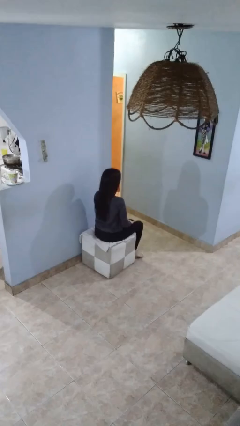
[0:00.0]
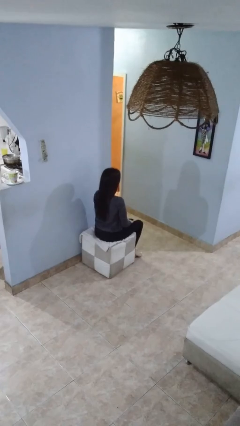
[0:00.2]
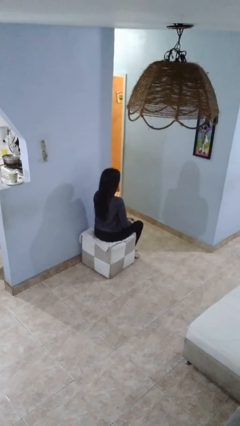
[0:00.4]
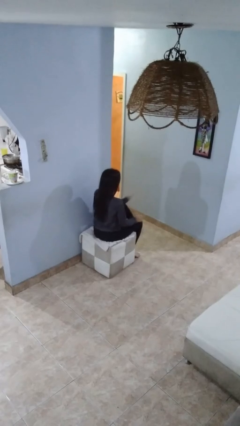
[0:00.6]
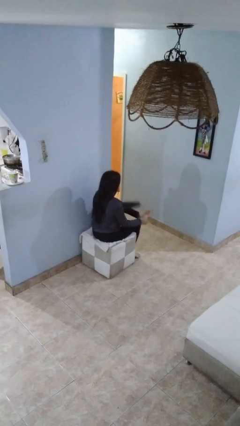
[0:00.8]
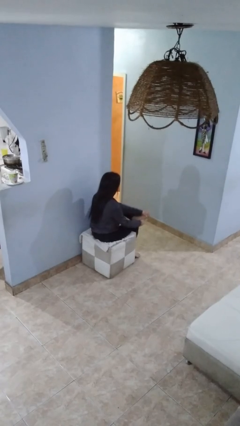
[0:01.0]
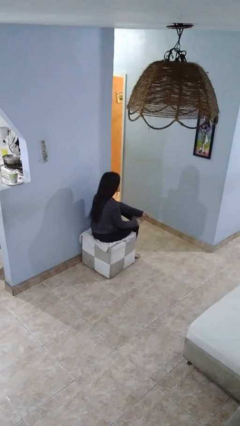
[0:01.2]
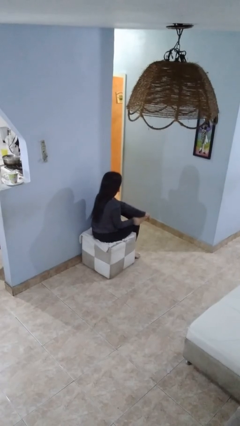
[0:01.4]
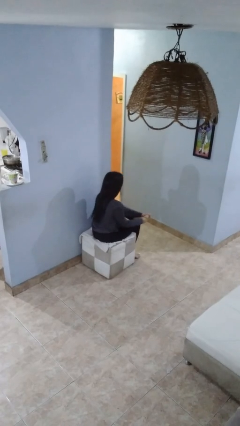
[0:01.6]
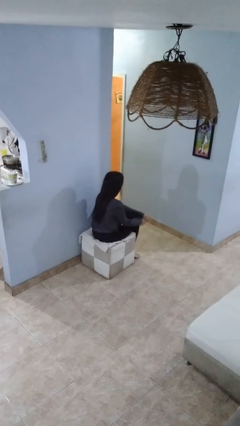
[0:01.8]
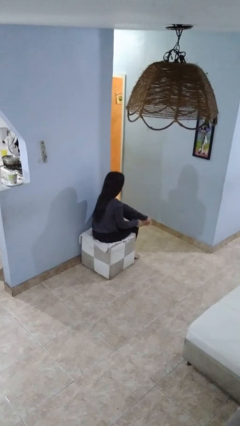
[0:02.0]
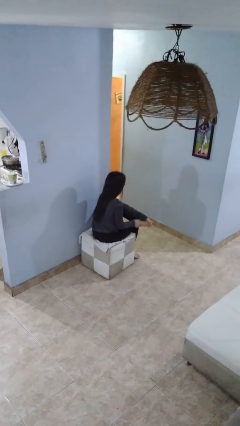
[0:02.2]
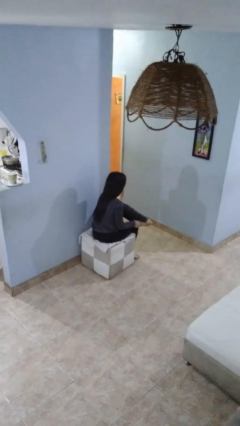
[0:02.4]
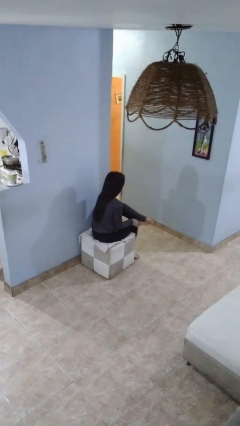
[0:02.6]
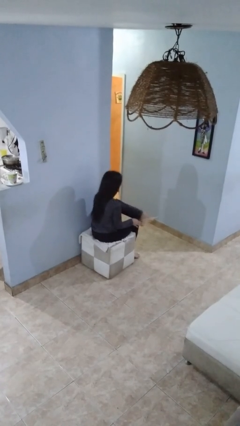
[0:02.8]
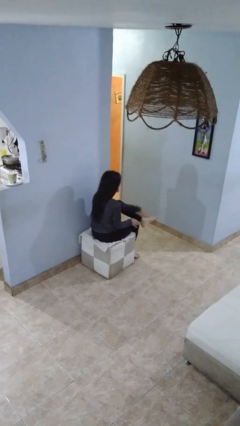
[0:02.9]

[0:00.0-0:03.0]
person rubs foot

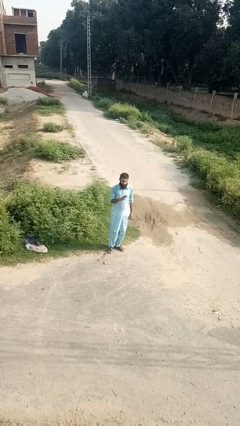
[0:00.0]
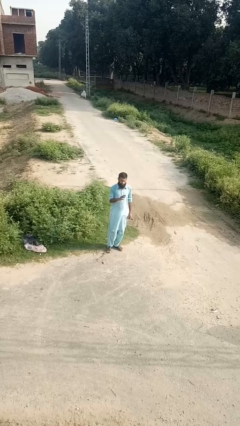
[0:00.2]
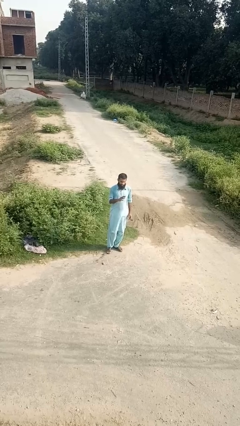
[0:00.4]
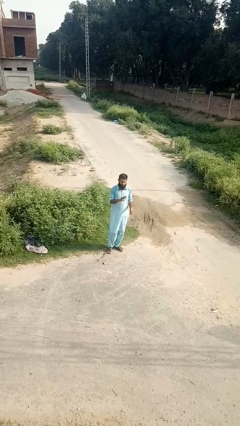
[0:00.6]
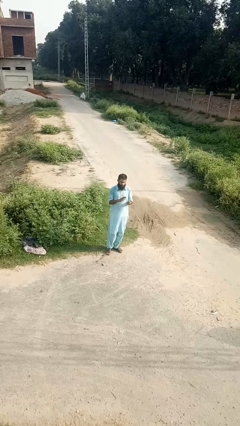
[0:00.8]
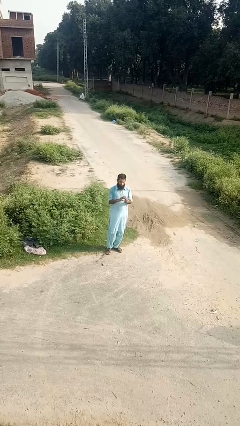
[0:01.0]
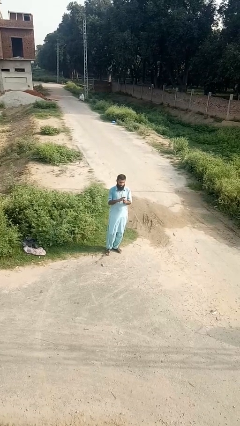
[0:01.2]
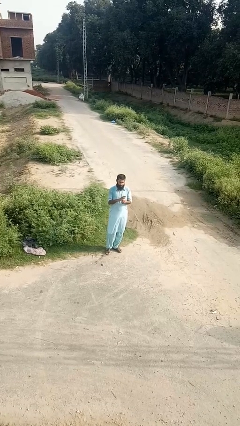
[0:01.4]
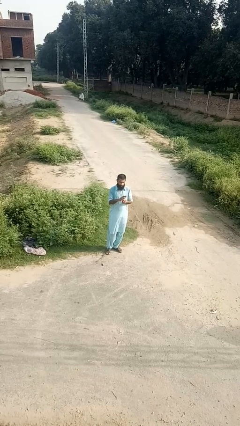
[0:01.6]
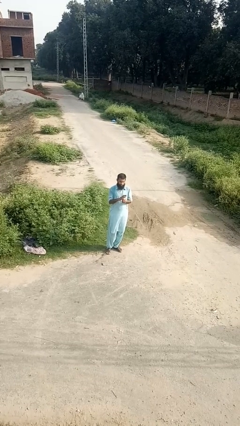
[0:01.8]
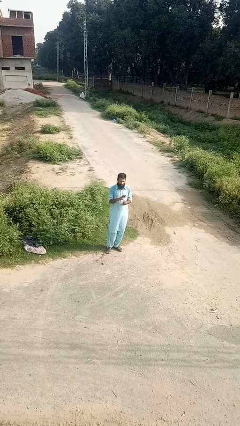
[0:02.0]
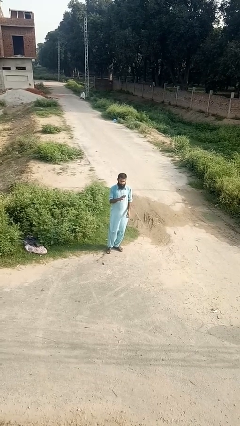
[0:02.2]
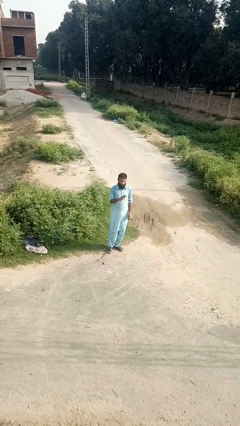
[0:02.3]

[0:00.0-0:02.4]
person puts on ring

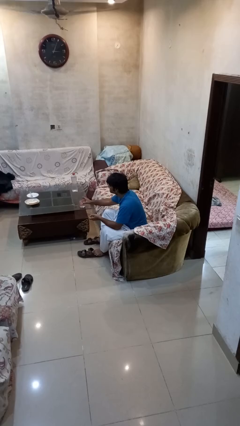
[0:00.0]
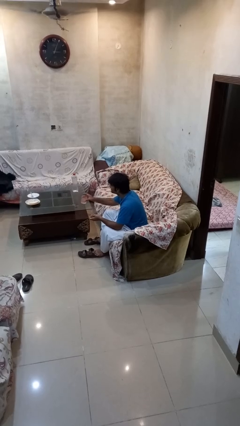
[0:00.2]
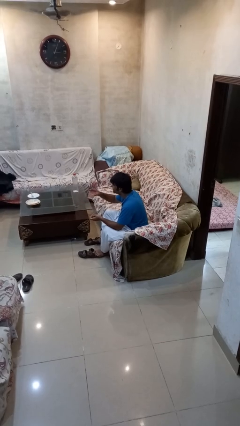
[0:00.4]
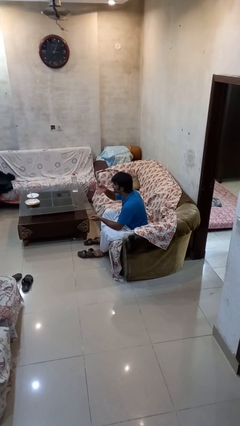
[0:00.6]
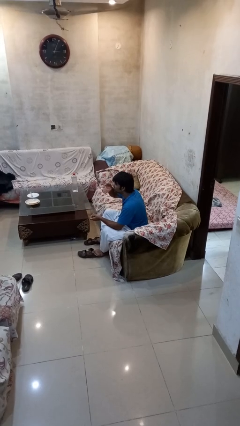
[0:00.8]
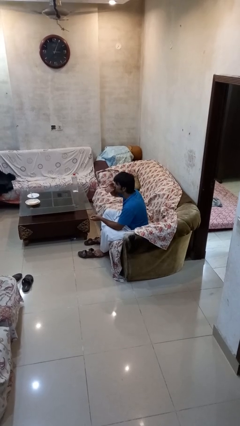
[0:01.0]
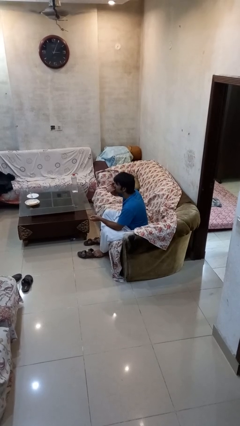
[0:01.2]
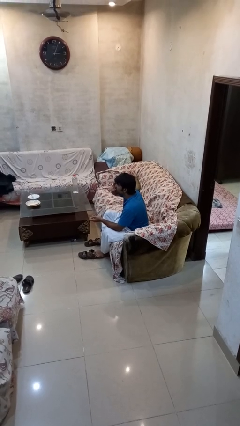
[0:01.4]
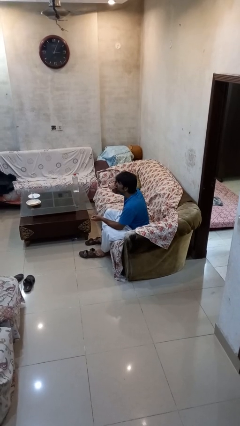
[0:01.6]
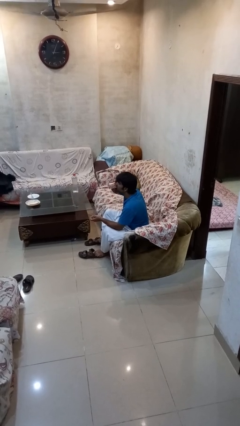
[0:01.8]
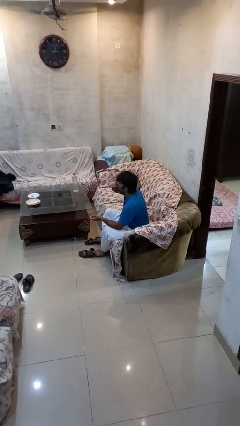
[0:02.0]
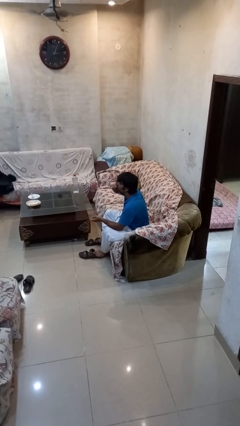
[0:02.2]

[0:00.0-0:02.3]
person drinks from cup

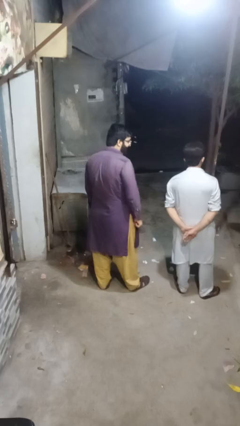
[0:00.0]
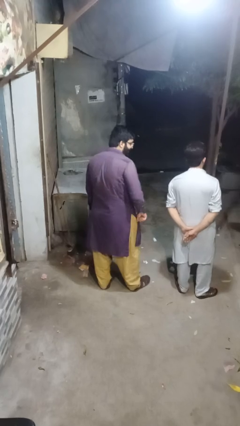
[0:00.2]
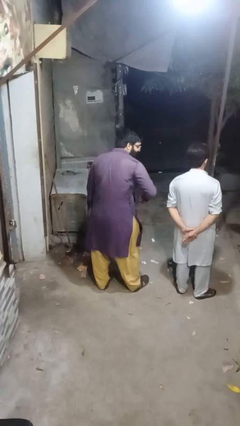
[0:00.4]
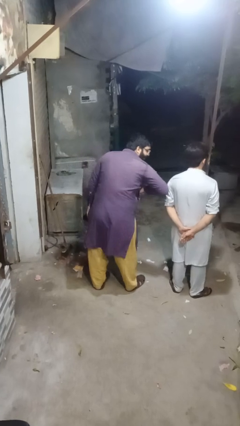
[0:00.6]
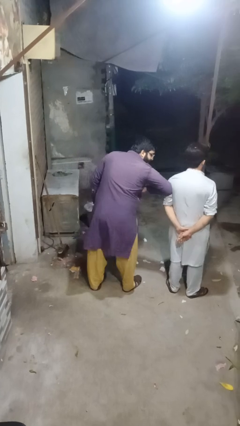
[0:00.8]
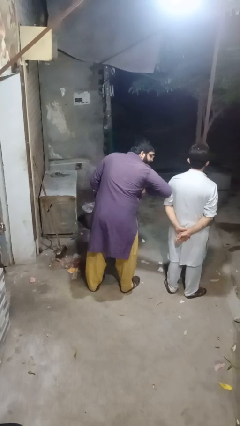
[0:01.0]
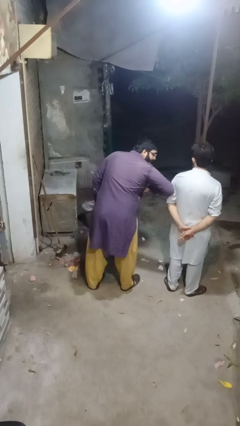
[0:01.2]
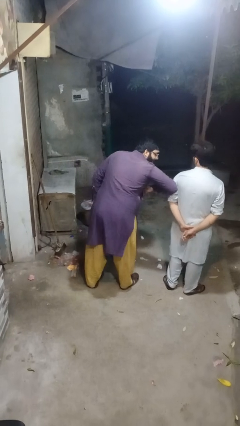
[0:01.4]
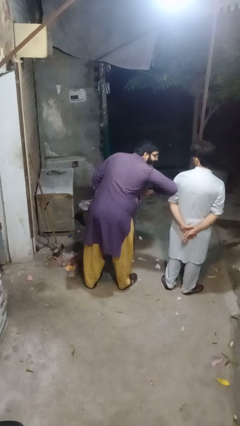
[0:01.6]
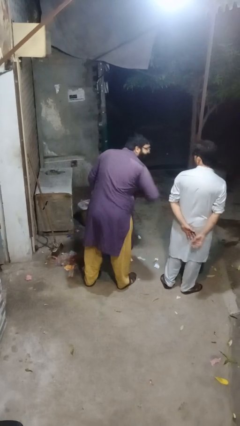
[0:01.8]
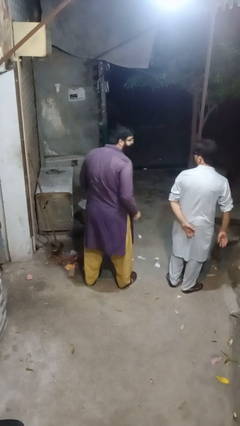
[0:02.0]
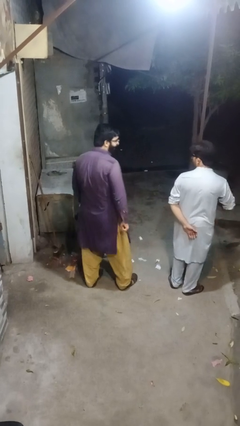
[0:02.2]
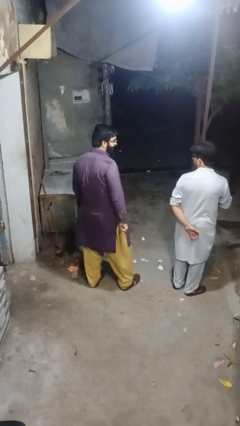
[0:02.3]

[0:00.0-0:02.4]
person nudges person with elbow

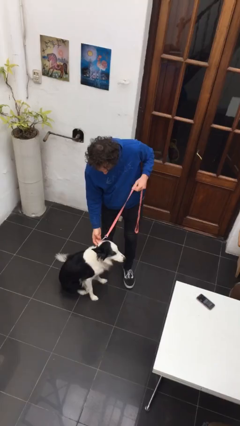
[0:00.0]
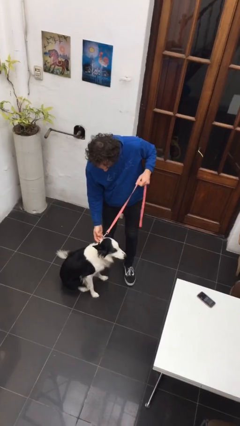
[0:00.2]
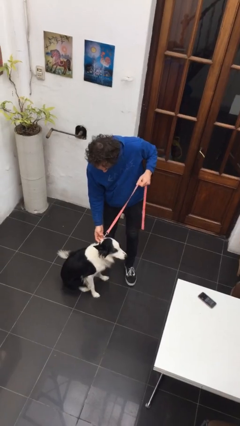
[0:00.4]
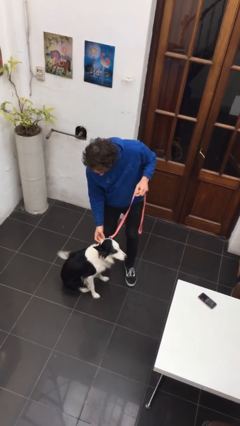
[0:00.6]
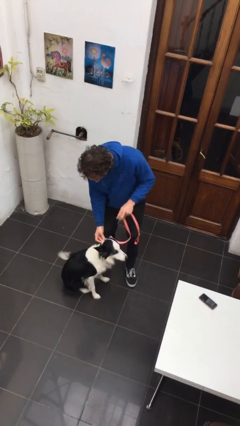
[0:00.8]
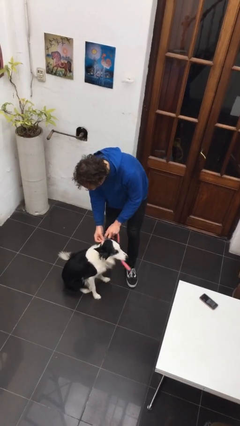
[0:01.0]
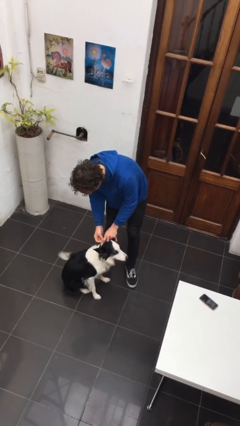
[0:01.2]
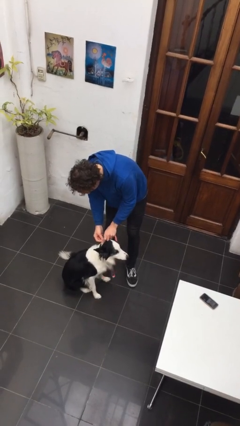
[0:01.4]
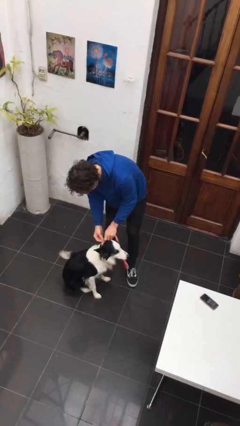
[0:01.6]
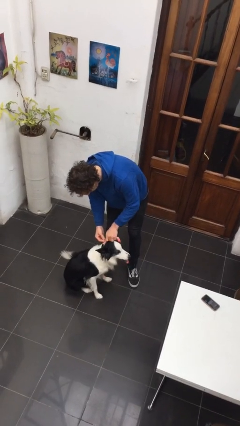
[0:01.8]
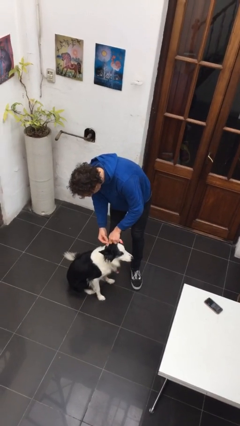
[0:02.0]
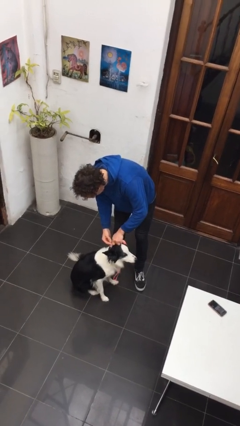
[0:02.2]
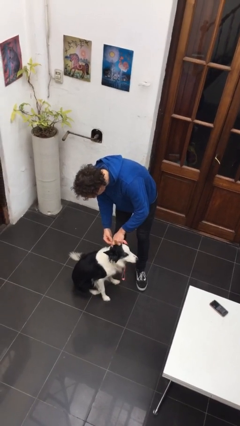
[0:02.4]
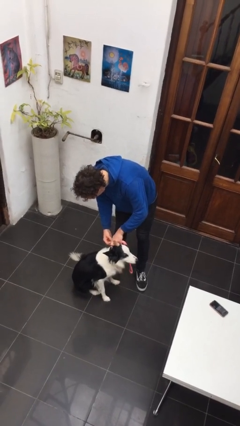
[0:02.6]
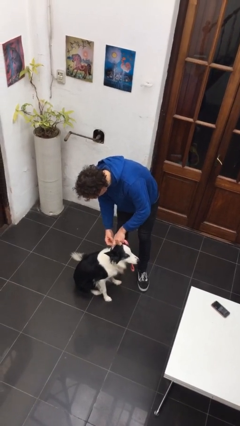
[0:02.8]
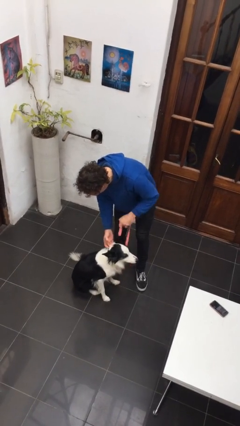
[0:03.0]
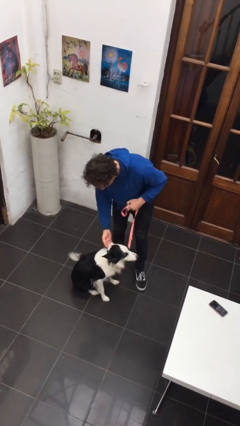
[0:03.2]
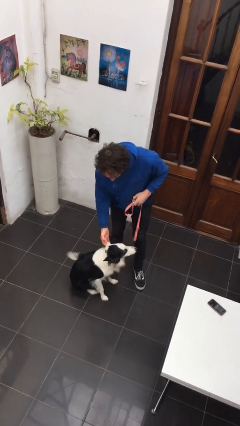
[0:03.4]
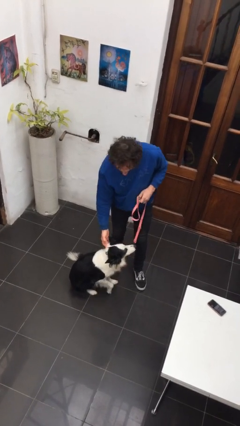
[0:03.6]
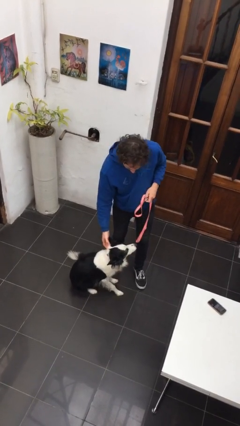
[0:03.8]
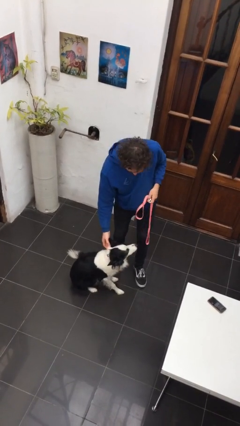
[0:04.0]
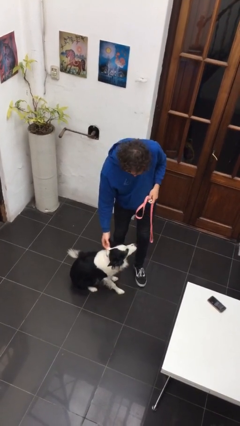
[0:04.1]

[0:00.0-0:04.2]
person unattaches leash from dog

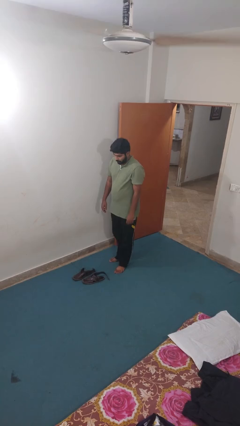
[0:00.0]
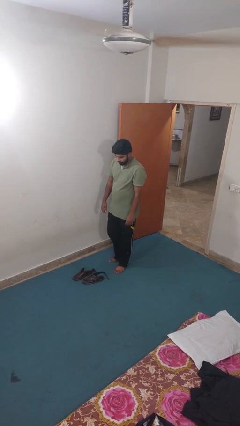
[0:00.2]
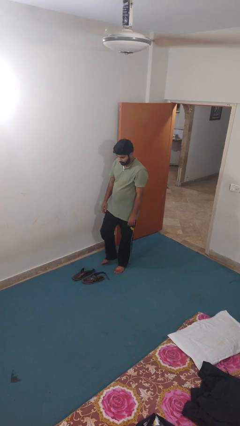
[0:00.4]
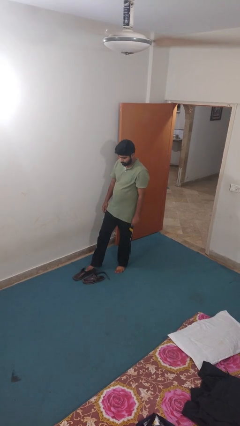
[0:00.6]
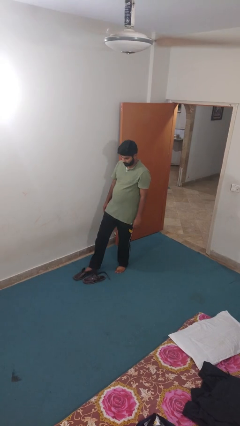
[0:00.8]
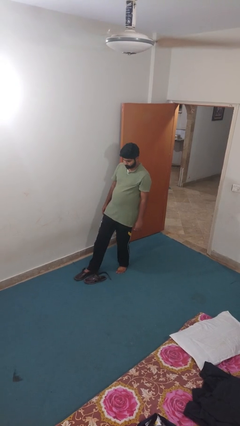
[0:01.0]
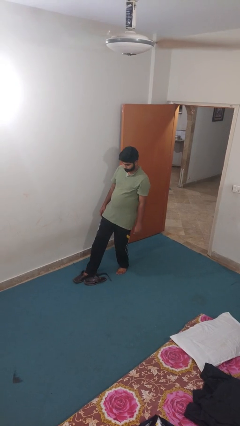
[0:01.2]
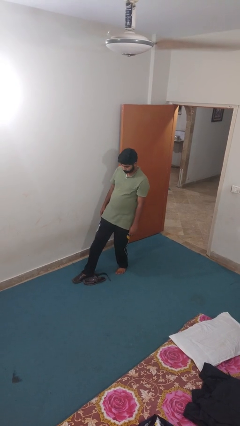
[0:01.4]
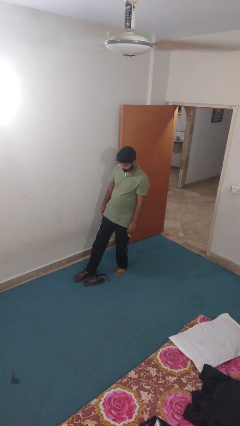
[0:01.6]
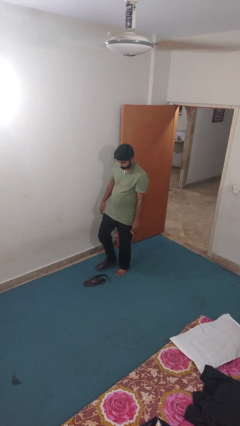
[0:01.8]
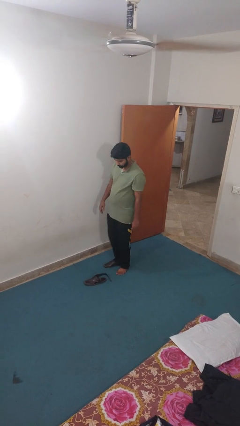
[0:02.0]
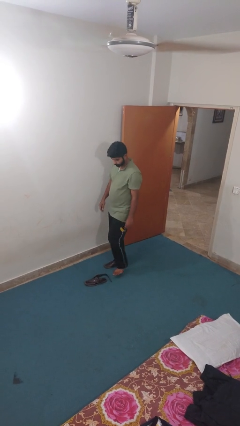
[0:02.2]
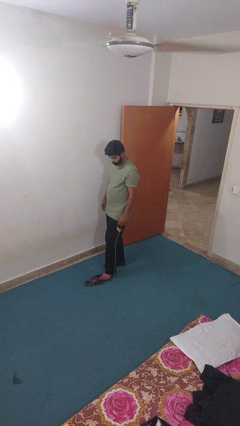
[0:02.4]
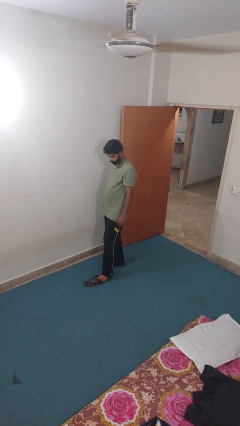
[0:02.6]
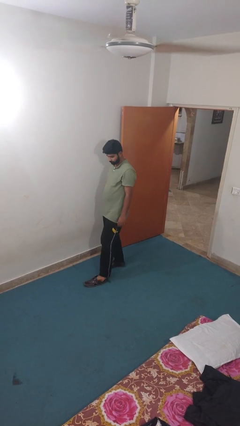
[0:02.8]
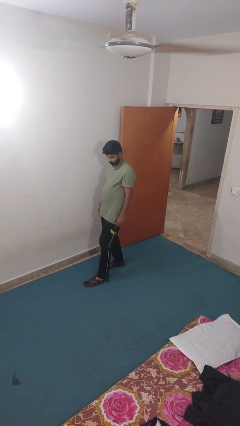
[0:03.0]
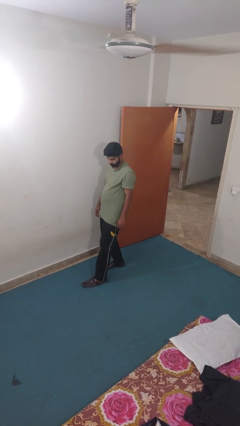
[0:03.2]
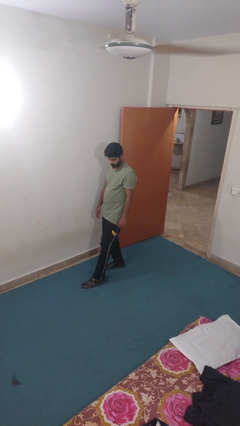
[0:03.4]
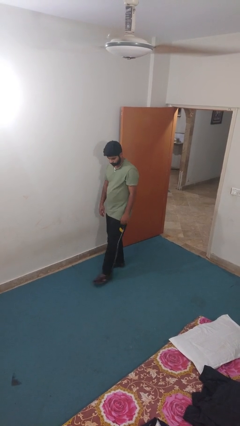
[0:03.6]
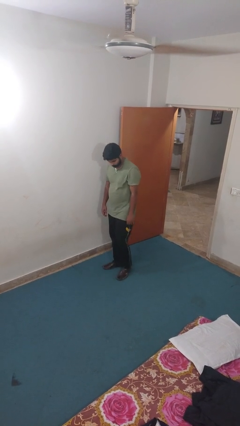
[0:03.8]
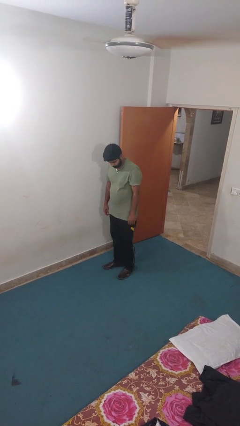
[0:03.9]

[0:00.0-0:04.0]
person puts on shoes
